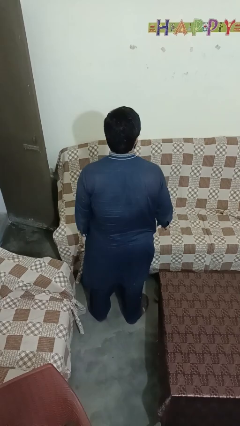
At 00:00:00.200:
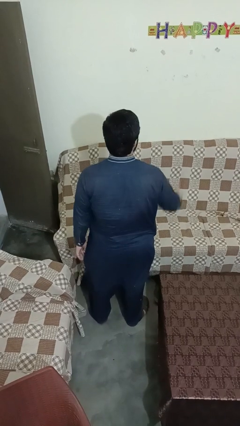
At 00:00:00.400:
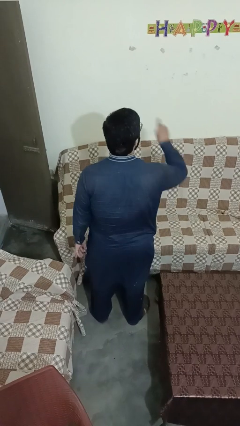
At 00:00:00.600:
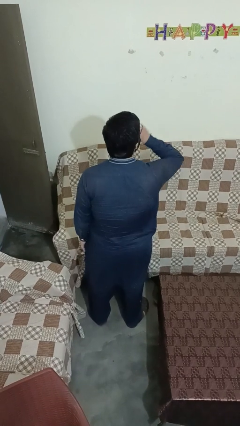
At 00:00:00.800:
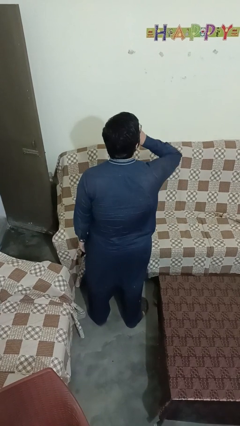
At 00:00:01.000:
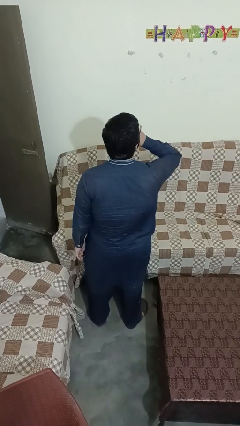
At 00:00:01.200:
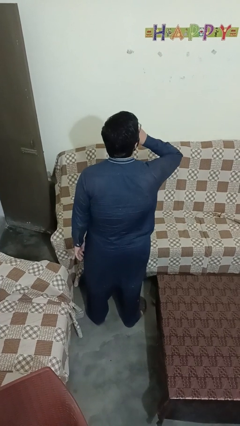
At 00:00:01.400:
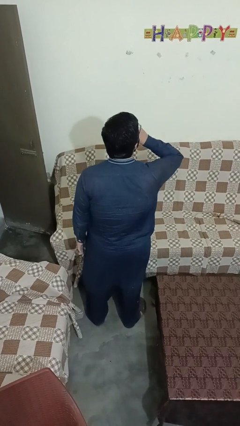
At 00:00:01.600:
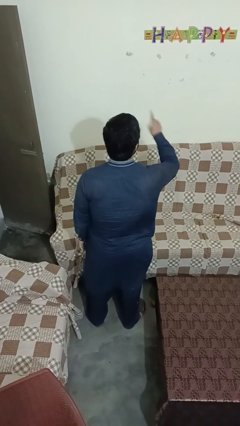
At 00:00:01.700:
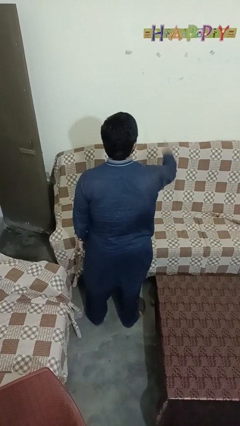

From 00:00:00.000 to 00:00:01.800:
person gestures be quiet

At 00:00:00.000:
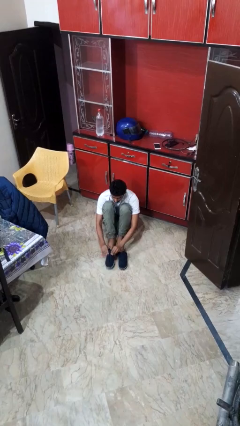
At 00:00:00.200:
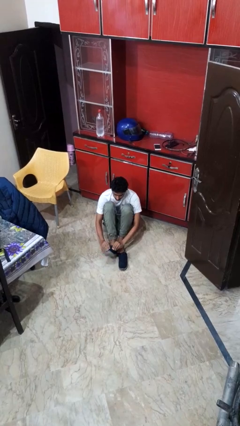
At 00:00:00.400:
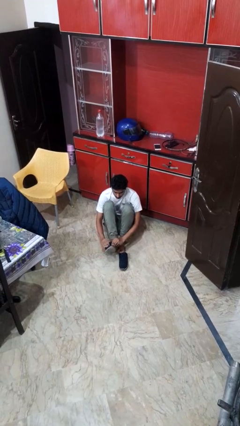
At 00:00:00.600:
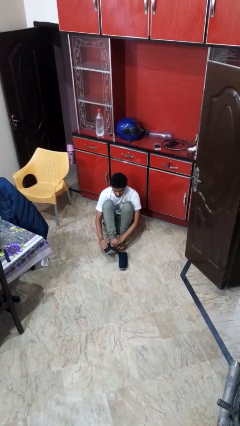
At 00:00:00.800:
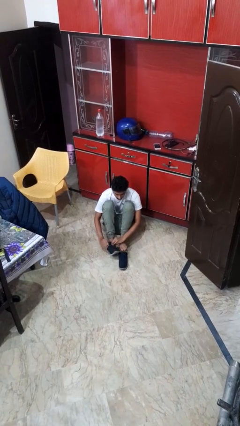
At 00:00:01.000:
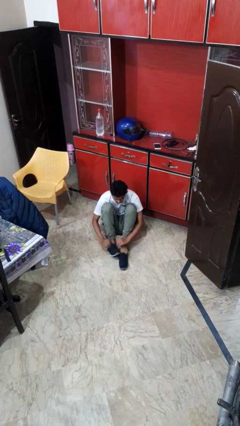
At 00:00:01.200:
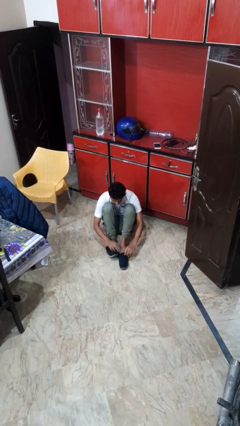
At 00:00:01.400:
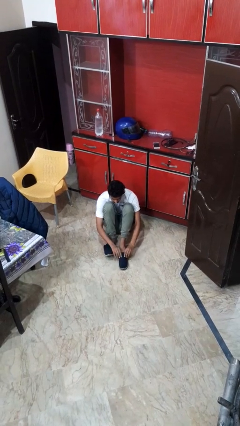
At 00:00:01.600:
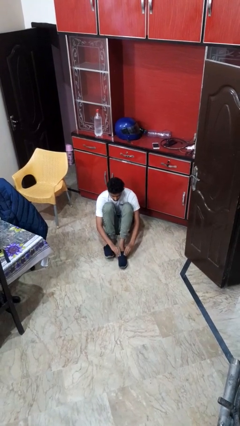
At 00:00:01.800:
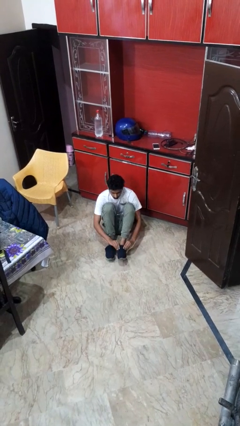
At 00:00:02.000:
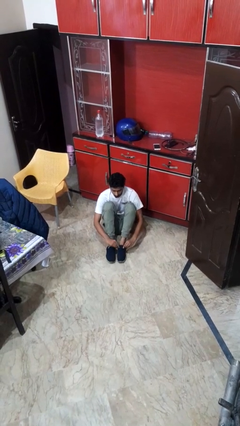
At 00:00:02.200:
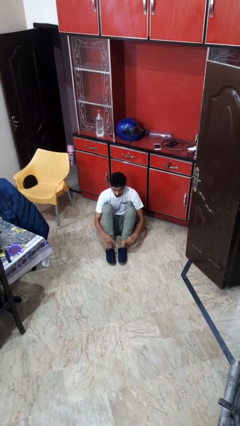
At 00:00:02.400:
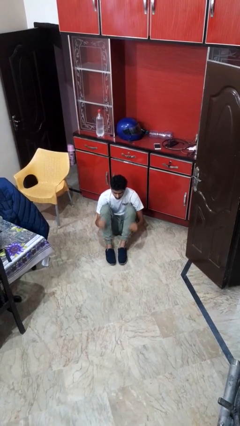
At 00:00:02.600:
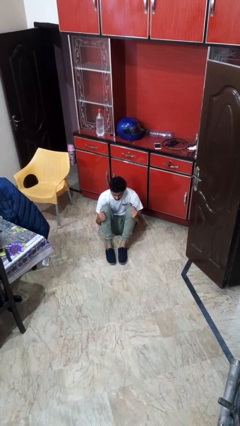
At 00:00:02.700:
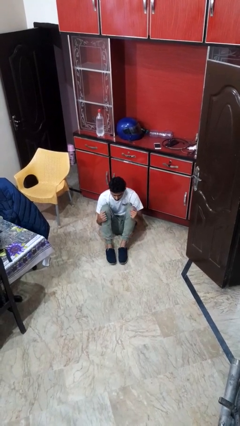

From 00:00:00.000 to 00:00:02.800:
person puts on shoes

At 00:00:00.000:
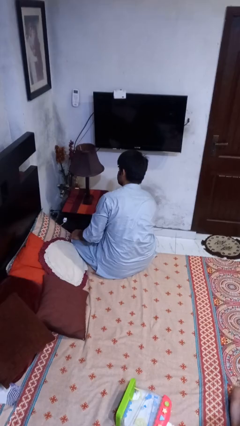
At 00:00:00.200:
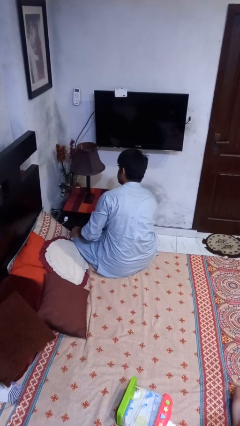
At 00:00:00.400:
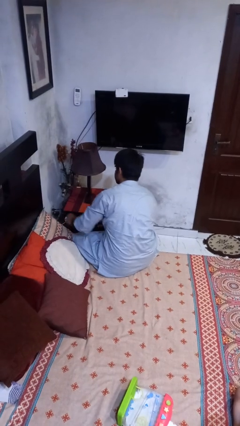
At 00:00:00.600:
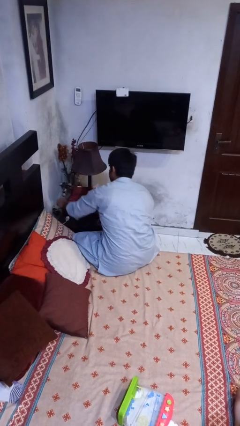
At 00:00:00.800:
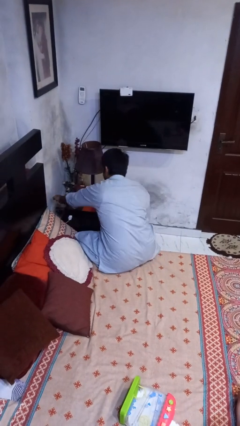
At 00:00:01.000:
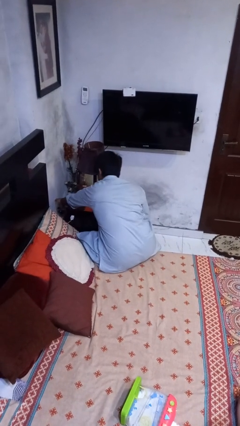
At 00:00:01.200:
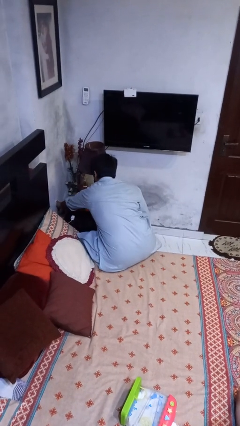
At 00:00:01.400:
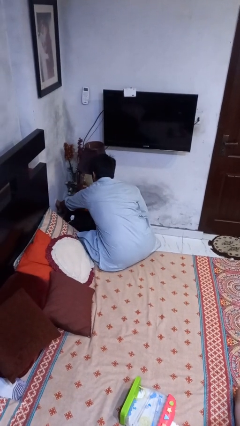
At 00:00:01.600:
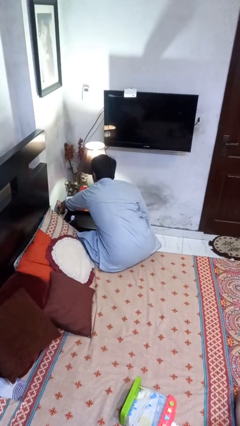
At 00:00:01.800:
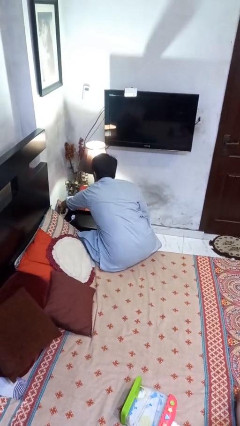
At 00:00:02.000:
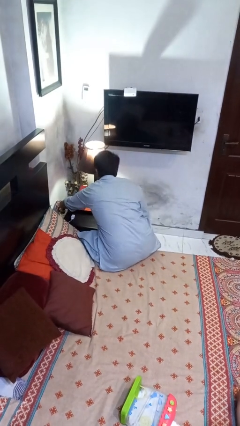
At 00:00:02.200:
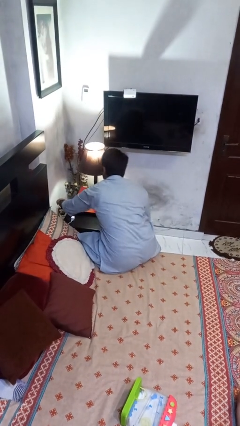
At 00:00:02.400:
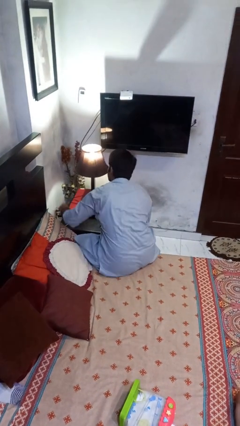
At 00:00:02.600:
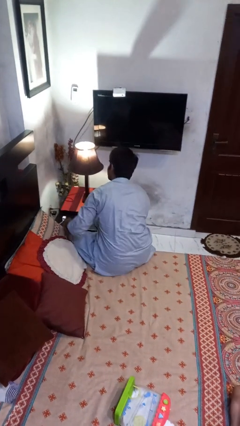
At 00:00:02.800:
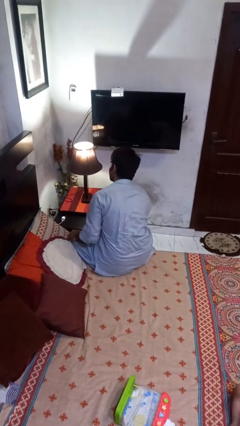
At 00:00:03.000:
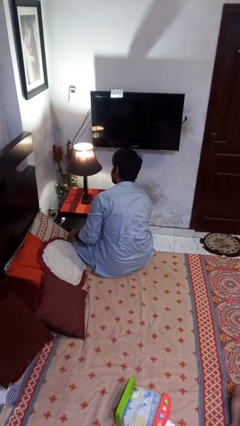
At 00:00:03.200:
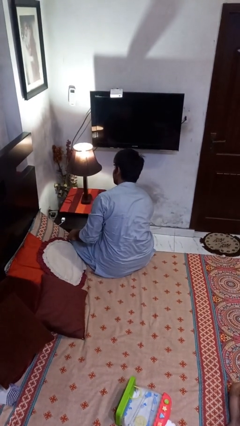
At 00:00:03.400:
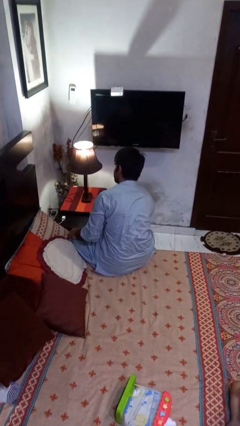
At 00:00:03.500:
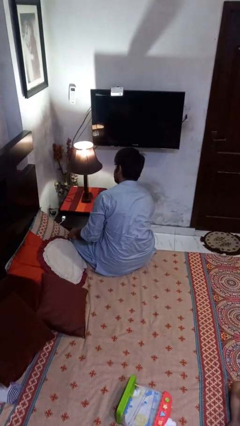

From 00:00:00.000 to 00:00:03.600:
person turns on lamp

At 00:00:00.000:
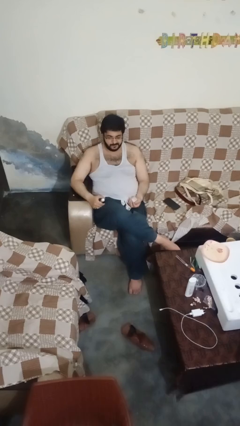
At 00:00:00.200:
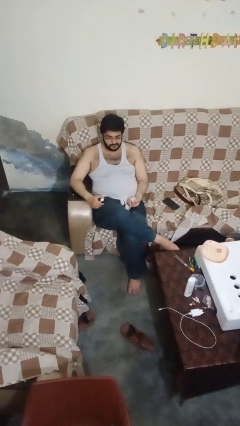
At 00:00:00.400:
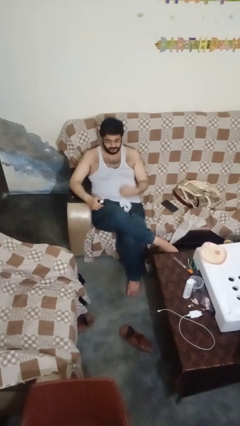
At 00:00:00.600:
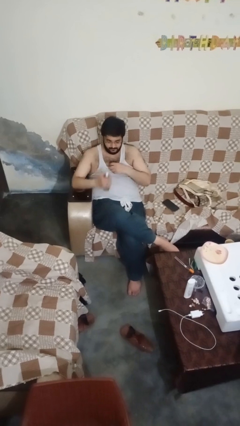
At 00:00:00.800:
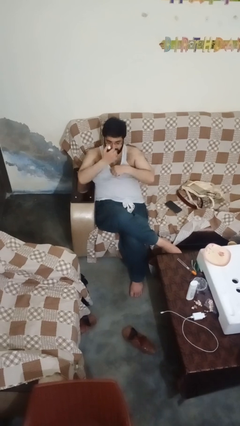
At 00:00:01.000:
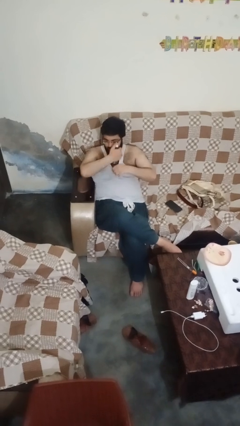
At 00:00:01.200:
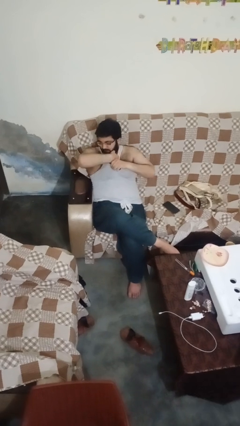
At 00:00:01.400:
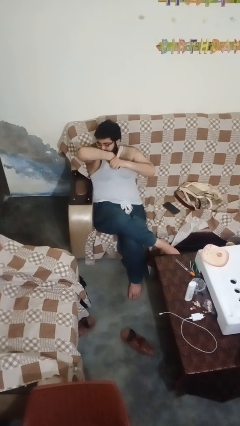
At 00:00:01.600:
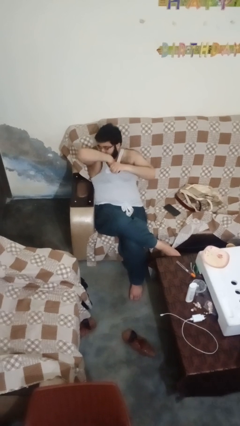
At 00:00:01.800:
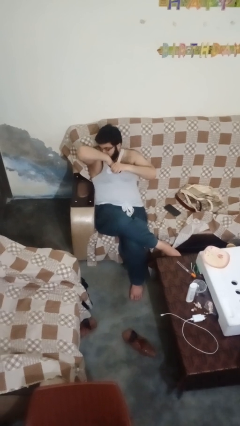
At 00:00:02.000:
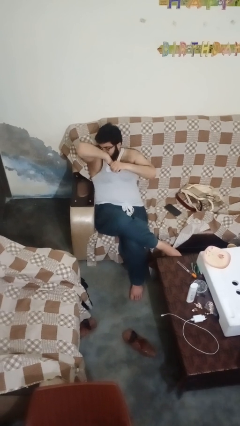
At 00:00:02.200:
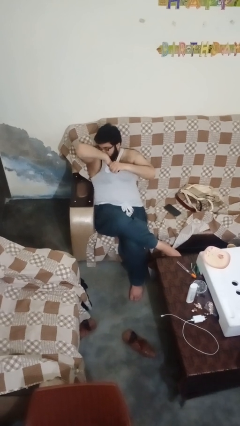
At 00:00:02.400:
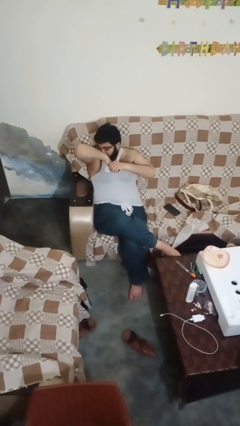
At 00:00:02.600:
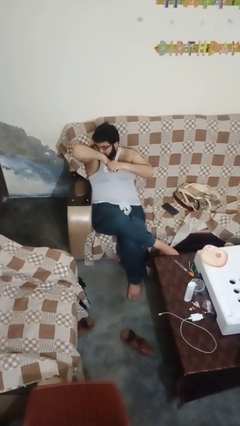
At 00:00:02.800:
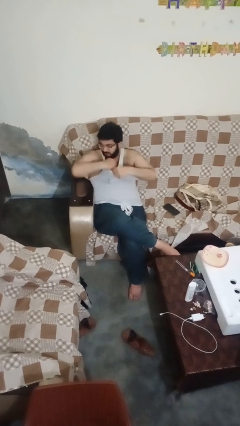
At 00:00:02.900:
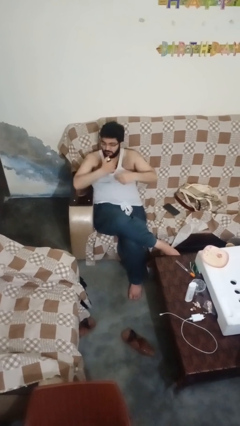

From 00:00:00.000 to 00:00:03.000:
person applies deodorant

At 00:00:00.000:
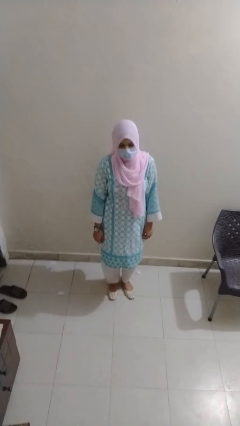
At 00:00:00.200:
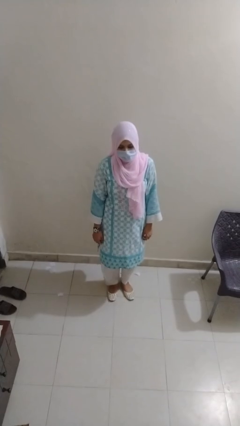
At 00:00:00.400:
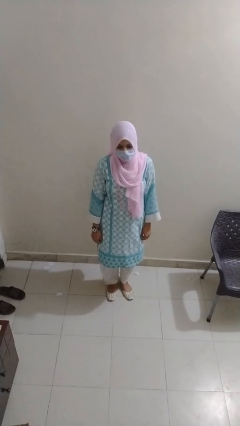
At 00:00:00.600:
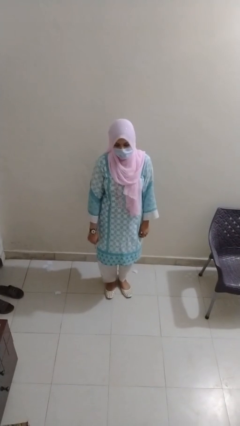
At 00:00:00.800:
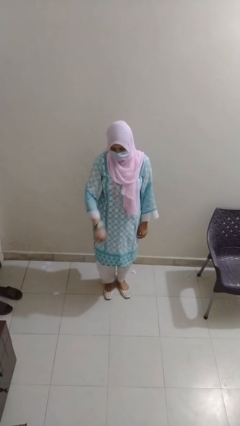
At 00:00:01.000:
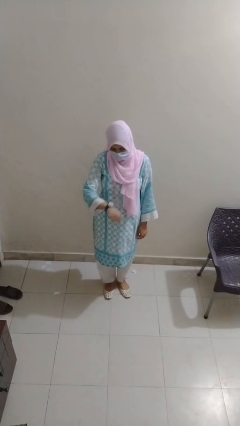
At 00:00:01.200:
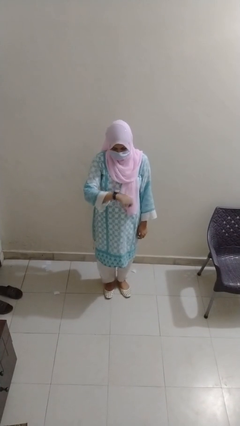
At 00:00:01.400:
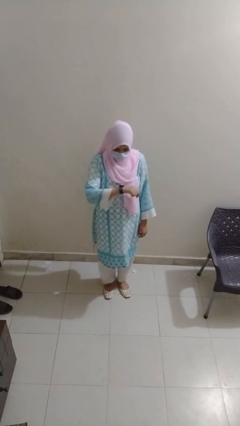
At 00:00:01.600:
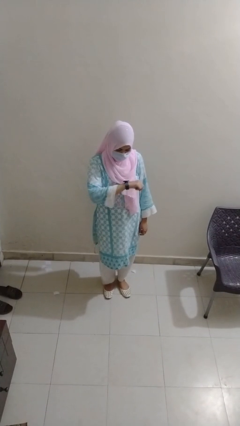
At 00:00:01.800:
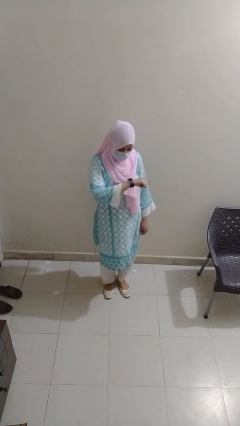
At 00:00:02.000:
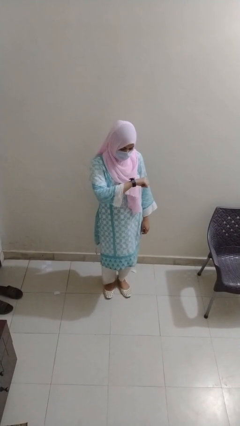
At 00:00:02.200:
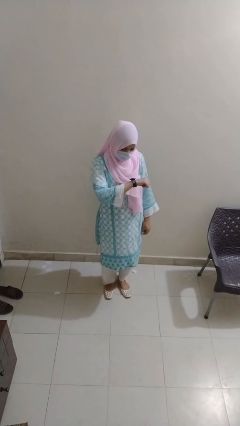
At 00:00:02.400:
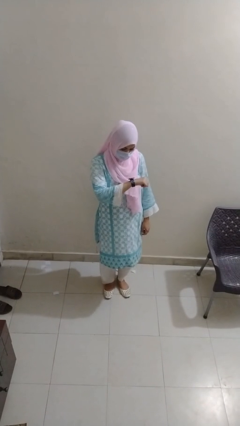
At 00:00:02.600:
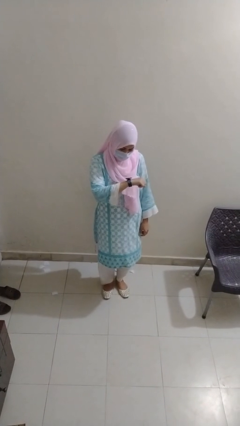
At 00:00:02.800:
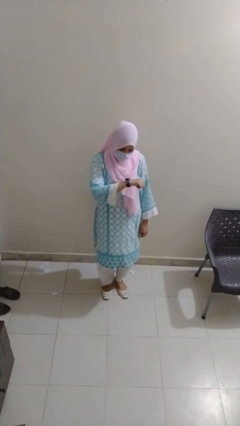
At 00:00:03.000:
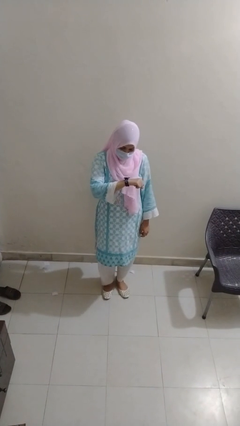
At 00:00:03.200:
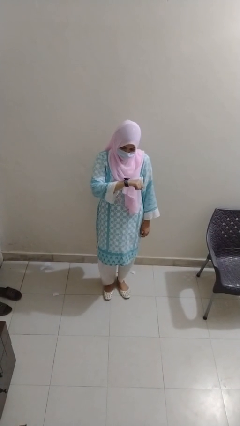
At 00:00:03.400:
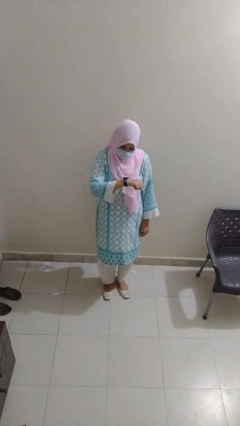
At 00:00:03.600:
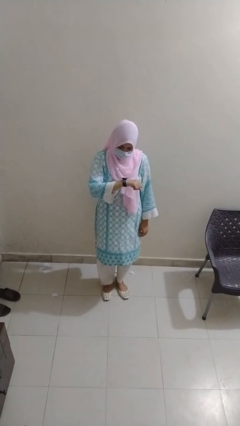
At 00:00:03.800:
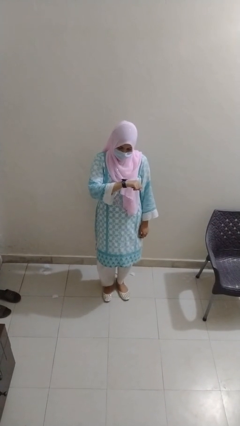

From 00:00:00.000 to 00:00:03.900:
person looks at wristwatch

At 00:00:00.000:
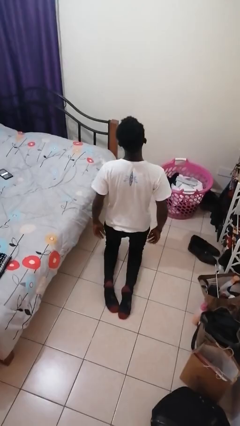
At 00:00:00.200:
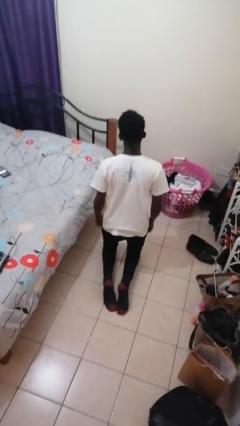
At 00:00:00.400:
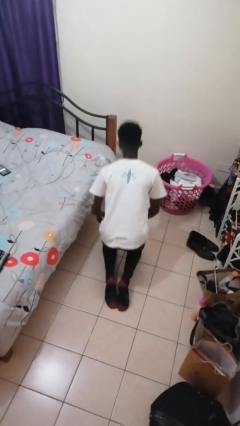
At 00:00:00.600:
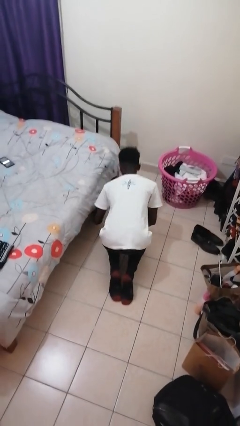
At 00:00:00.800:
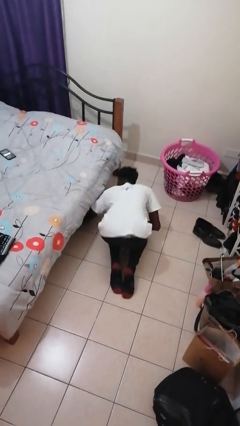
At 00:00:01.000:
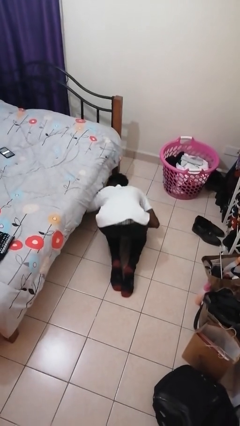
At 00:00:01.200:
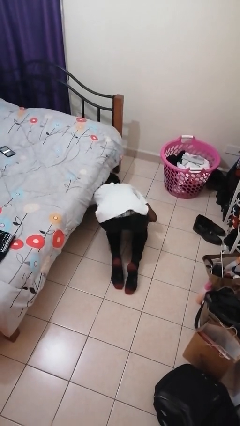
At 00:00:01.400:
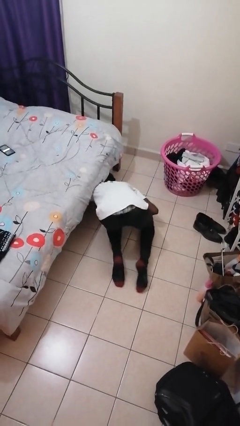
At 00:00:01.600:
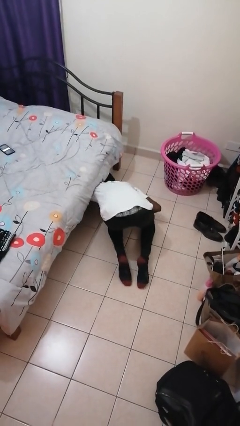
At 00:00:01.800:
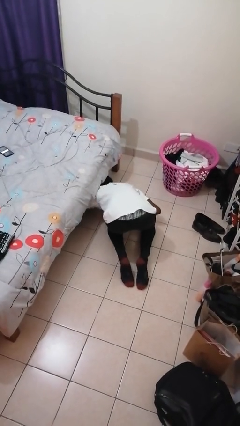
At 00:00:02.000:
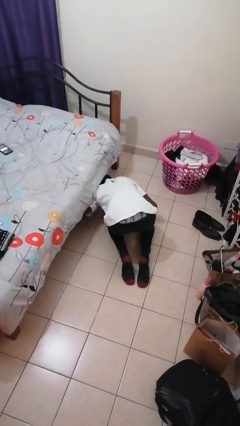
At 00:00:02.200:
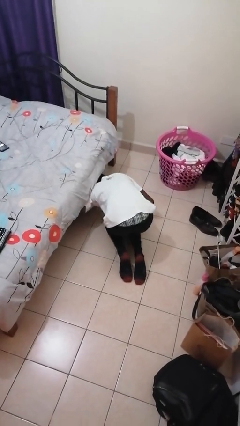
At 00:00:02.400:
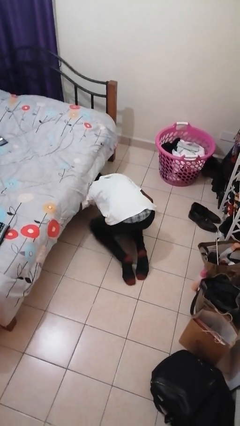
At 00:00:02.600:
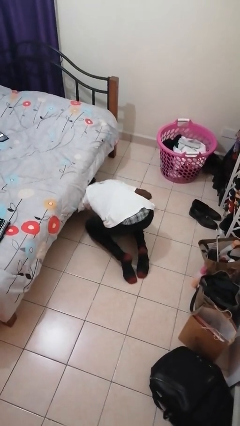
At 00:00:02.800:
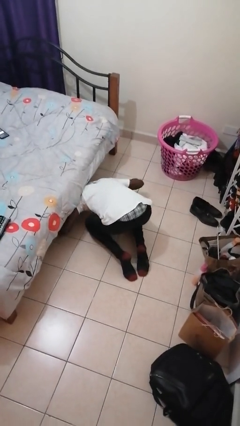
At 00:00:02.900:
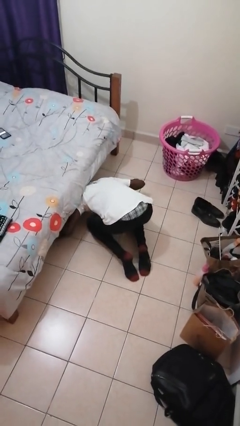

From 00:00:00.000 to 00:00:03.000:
person searches under bed
